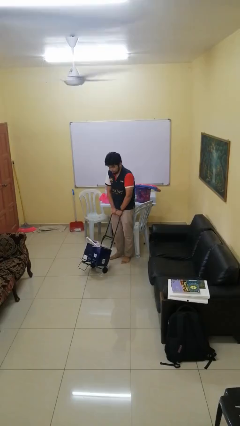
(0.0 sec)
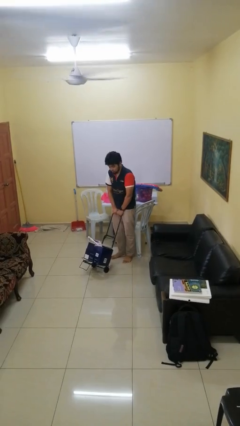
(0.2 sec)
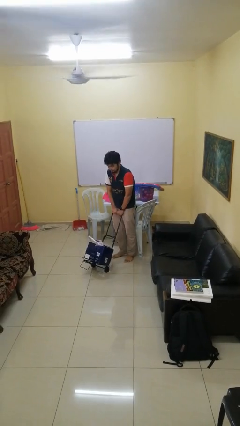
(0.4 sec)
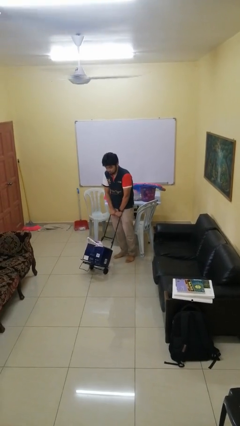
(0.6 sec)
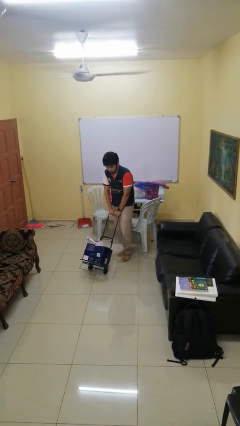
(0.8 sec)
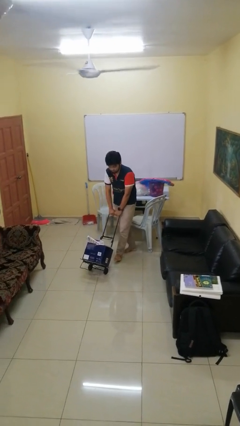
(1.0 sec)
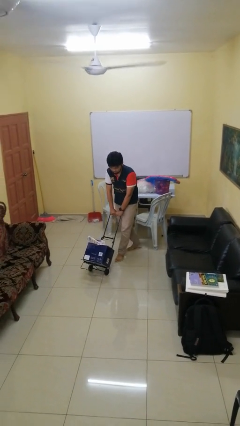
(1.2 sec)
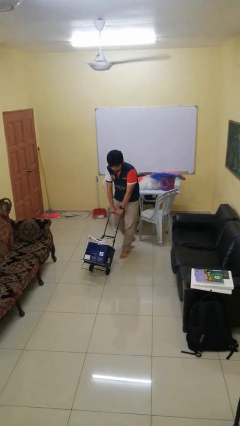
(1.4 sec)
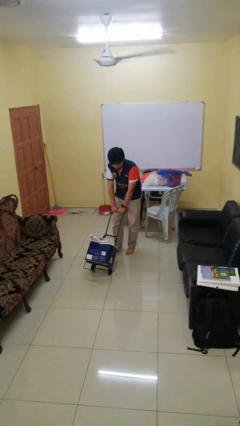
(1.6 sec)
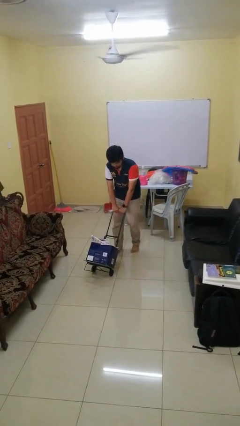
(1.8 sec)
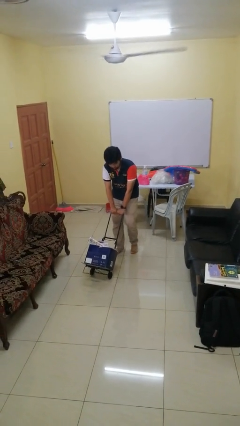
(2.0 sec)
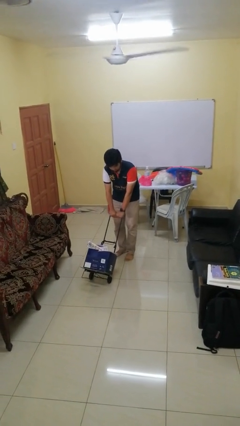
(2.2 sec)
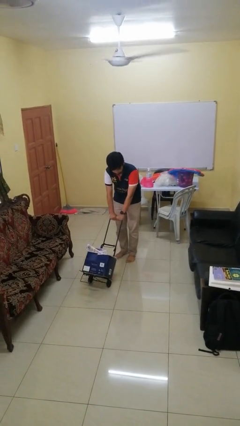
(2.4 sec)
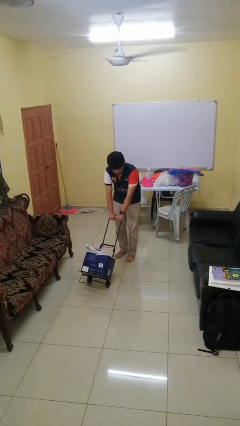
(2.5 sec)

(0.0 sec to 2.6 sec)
person pushes wheeled cart

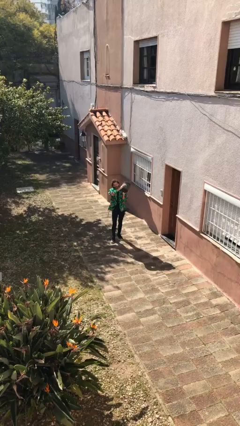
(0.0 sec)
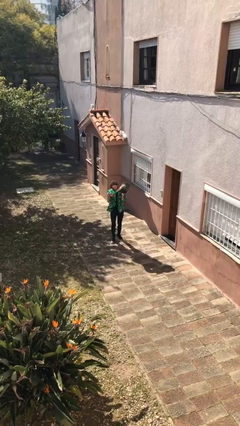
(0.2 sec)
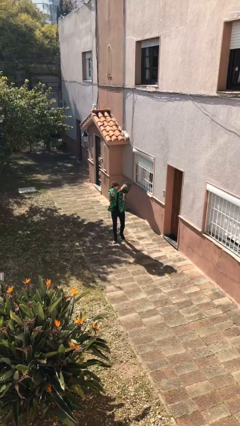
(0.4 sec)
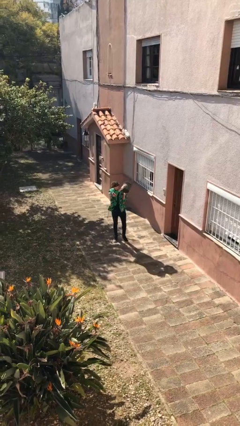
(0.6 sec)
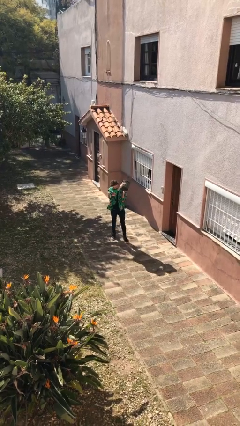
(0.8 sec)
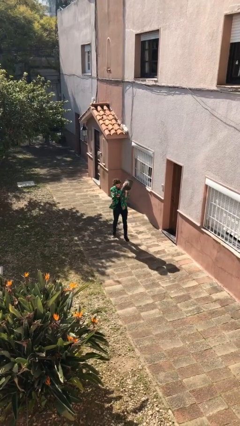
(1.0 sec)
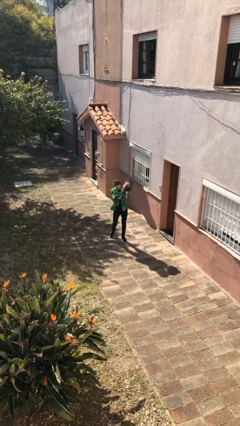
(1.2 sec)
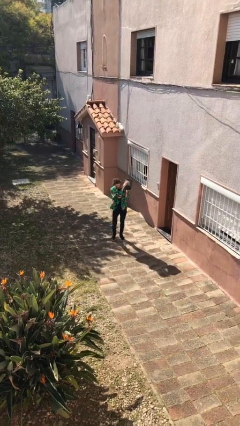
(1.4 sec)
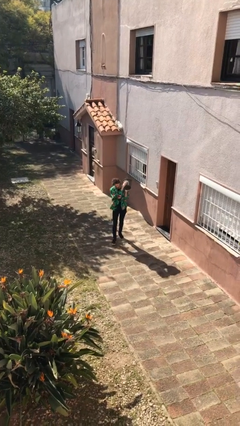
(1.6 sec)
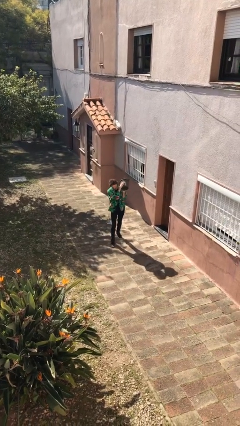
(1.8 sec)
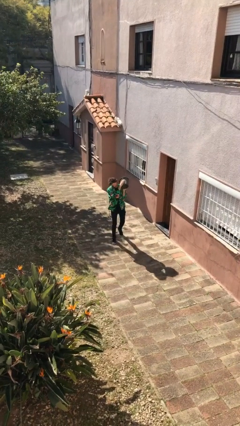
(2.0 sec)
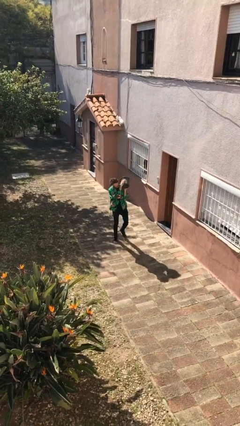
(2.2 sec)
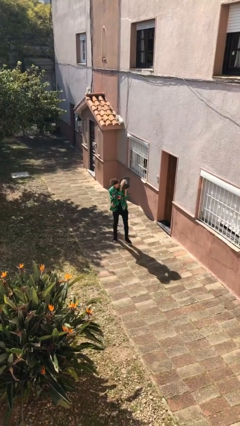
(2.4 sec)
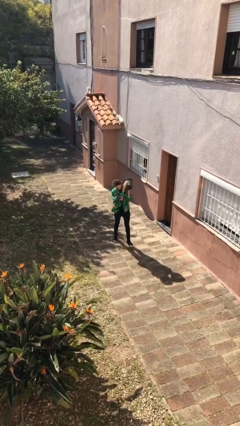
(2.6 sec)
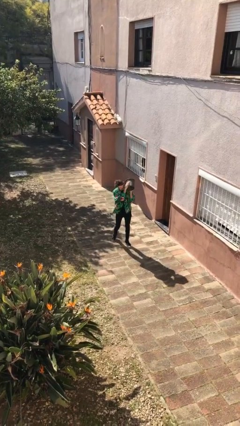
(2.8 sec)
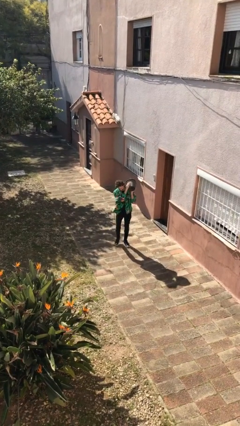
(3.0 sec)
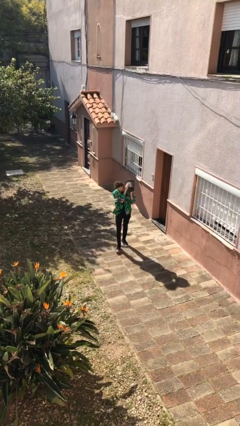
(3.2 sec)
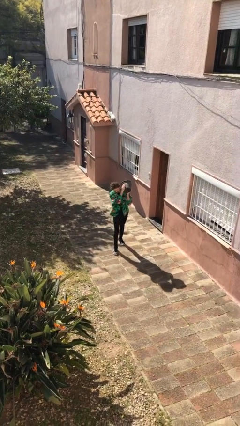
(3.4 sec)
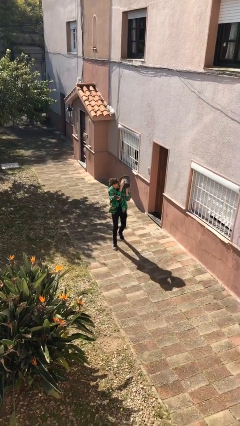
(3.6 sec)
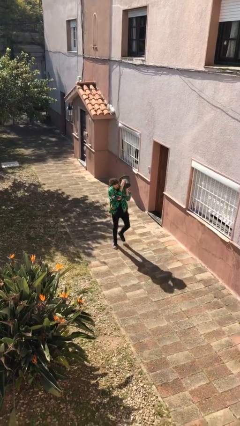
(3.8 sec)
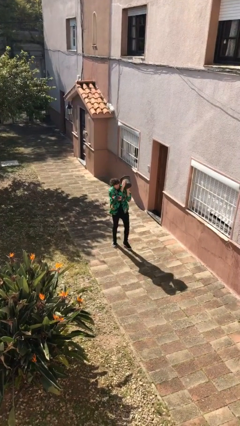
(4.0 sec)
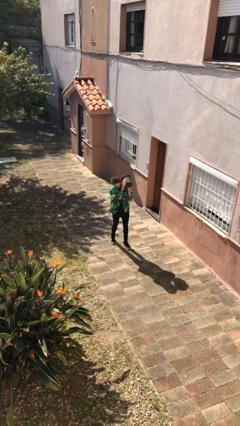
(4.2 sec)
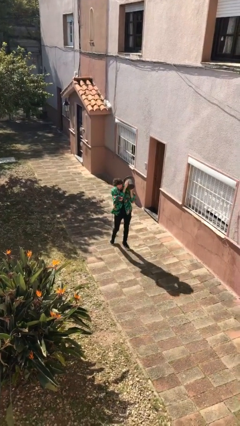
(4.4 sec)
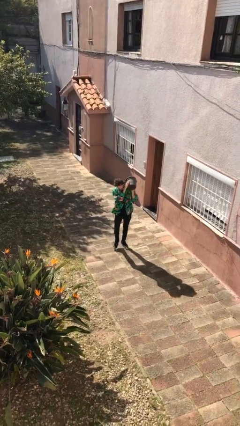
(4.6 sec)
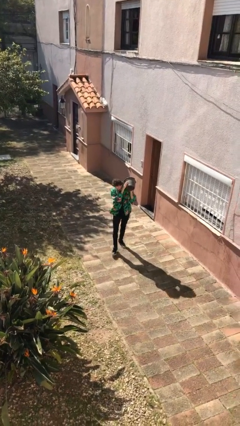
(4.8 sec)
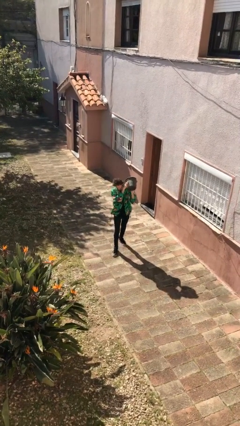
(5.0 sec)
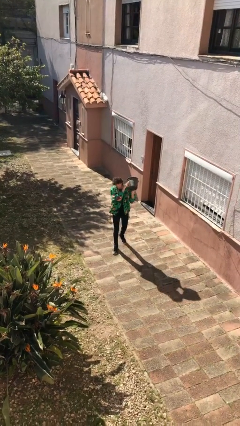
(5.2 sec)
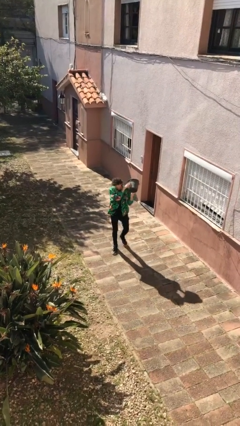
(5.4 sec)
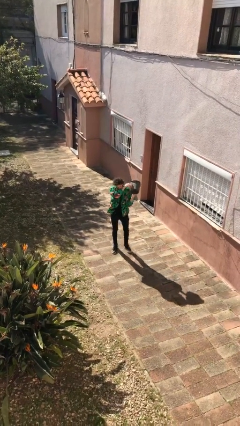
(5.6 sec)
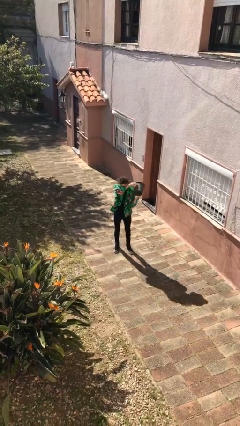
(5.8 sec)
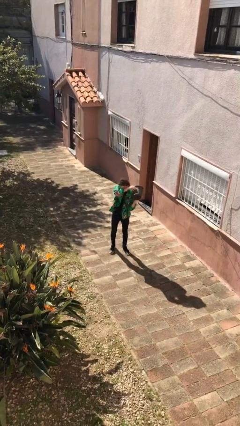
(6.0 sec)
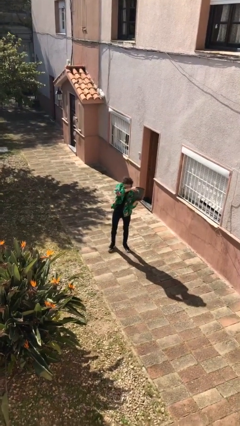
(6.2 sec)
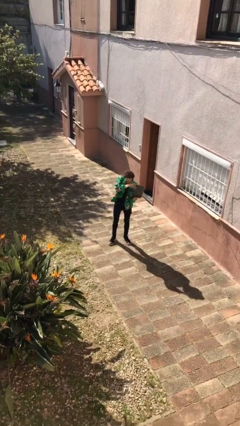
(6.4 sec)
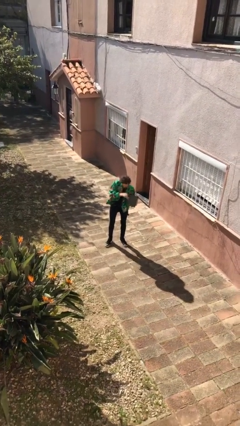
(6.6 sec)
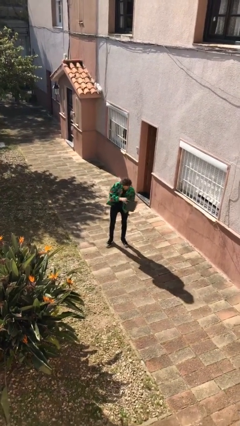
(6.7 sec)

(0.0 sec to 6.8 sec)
person carries heavy object

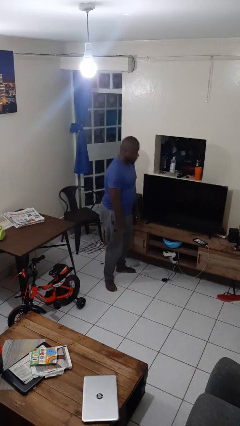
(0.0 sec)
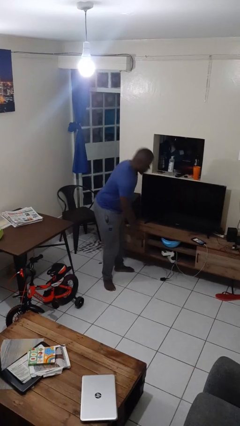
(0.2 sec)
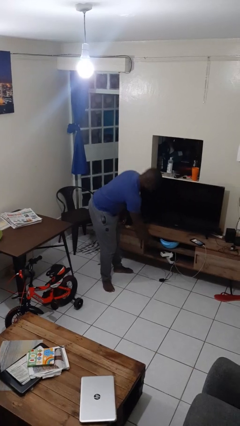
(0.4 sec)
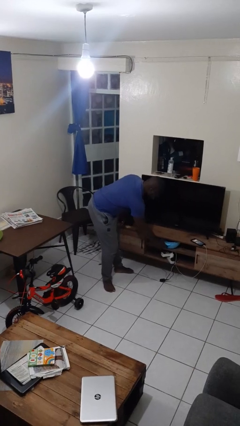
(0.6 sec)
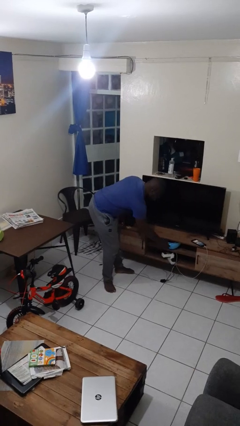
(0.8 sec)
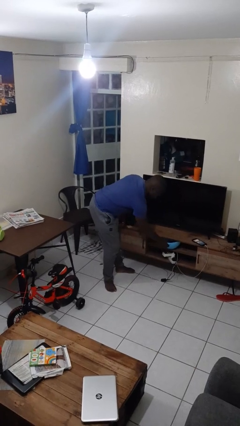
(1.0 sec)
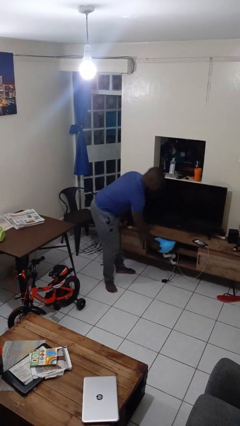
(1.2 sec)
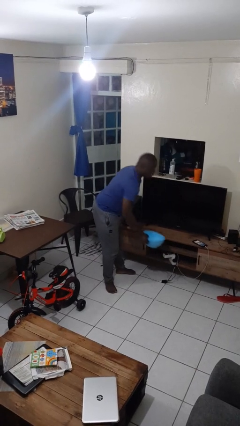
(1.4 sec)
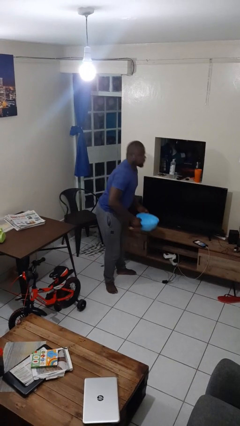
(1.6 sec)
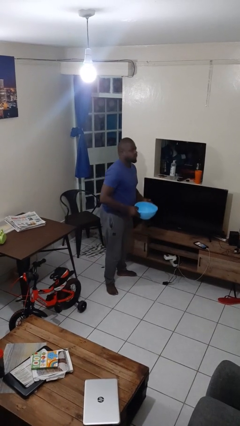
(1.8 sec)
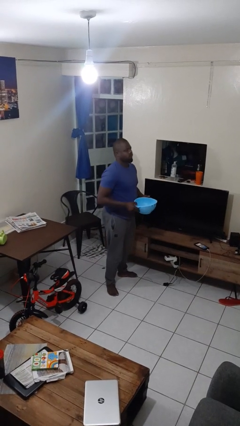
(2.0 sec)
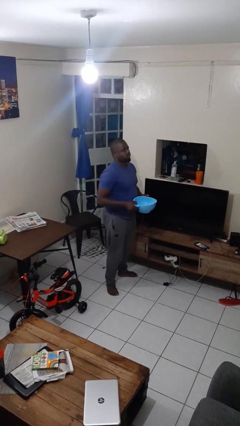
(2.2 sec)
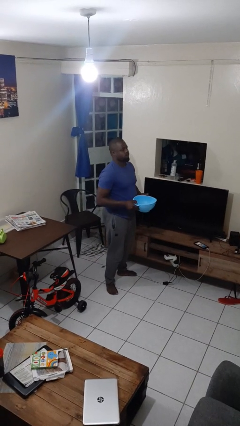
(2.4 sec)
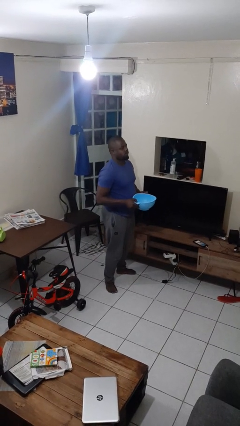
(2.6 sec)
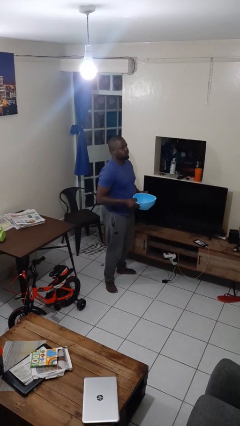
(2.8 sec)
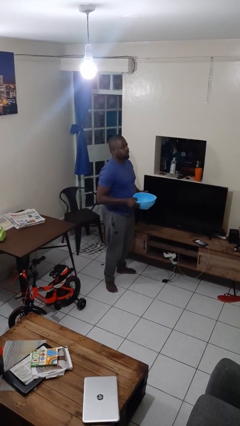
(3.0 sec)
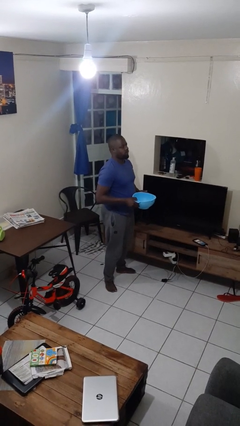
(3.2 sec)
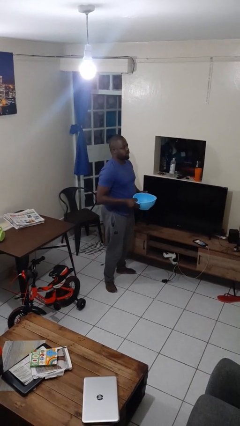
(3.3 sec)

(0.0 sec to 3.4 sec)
person picks up object from cabinet

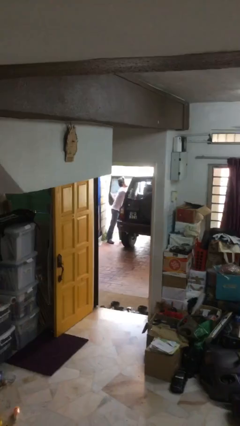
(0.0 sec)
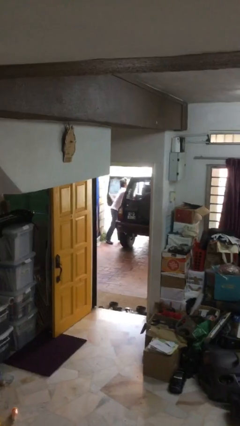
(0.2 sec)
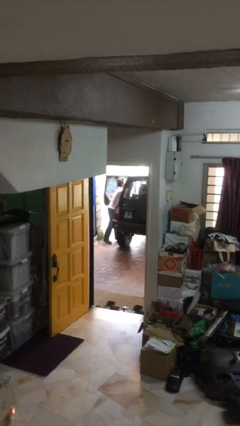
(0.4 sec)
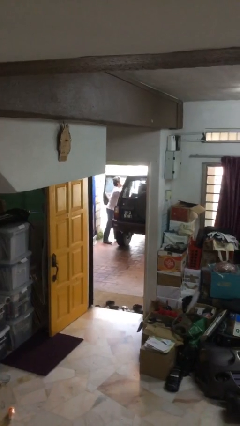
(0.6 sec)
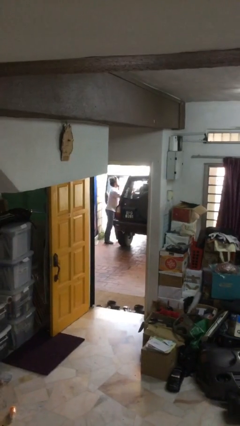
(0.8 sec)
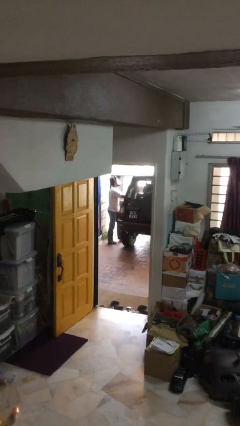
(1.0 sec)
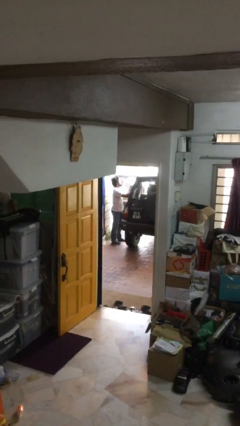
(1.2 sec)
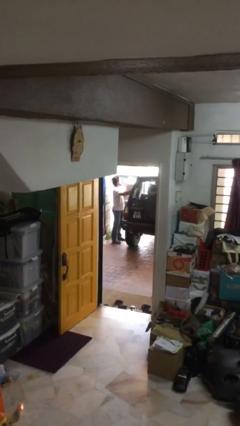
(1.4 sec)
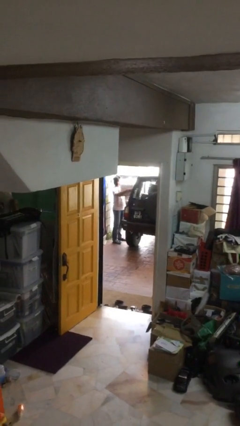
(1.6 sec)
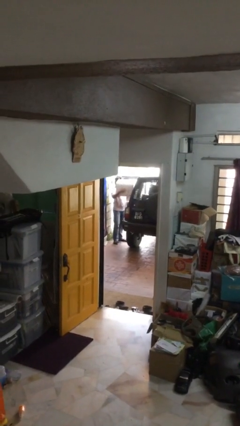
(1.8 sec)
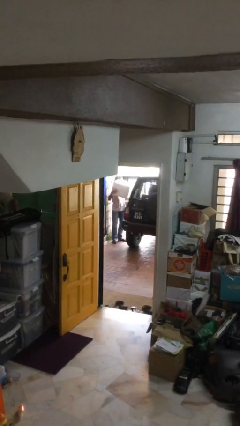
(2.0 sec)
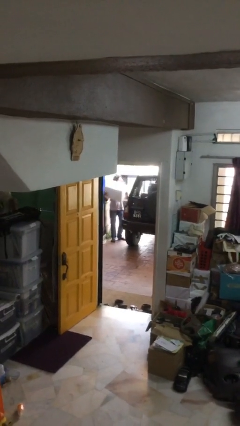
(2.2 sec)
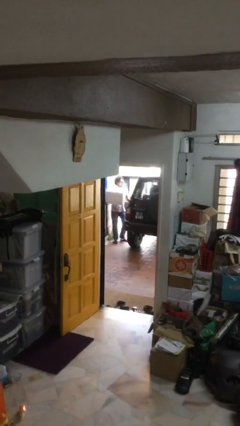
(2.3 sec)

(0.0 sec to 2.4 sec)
person unloads car

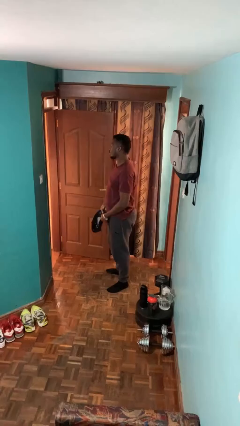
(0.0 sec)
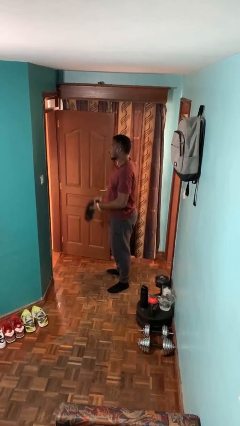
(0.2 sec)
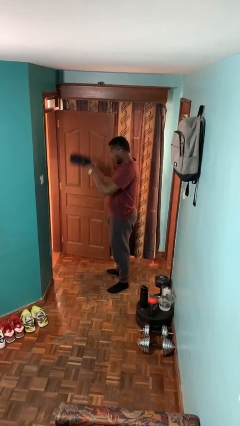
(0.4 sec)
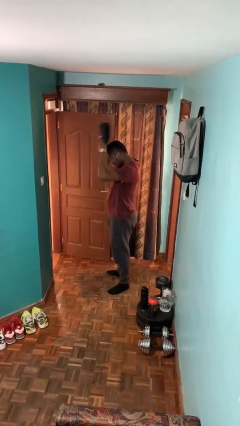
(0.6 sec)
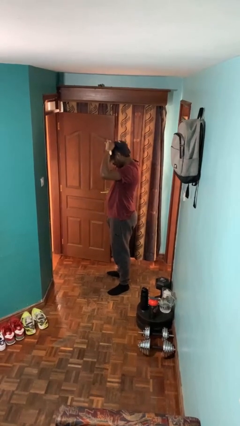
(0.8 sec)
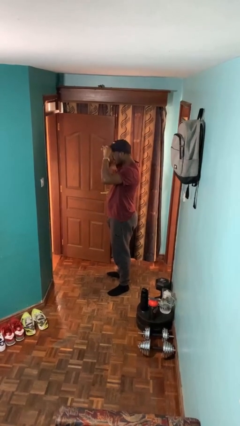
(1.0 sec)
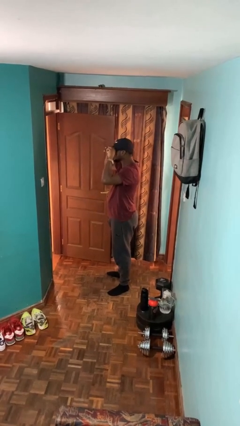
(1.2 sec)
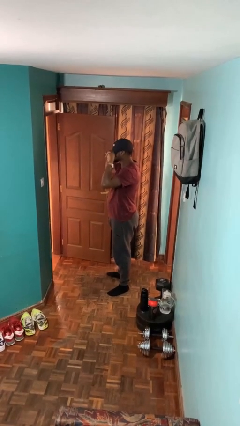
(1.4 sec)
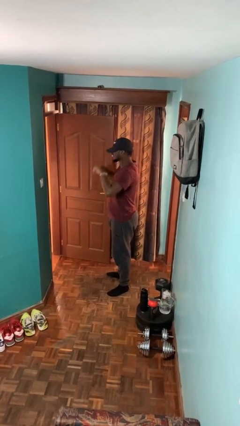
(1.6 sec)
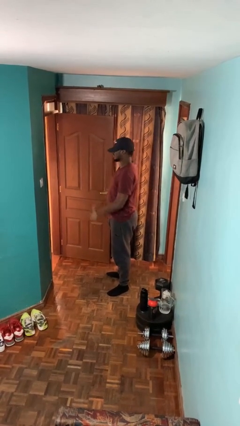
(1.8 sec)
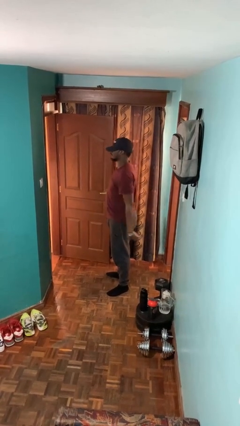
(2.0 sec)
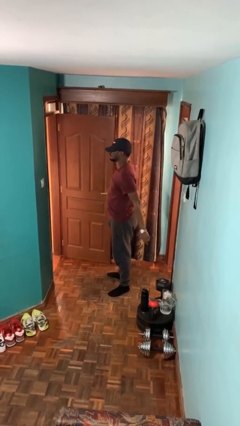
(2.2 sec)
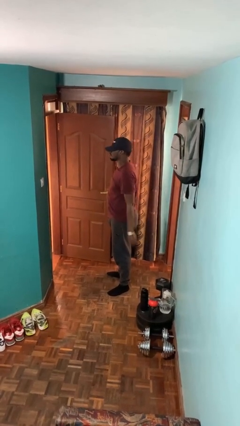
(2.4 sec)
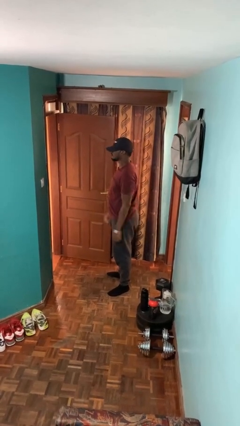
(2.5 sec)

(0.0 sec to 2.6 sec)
person puts on hat
